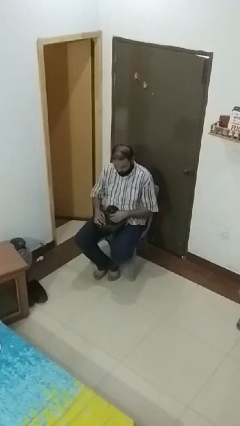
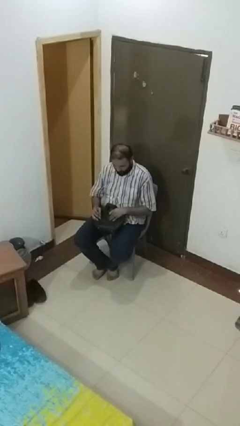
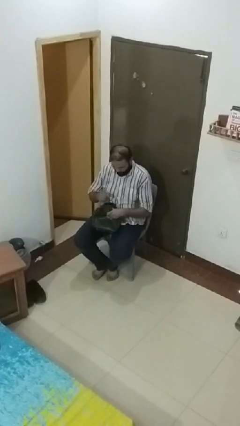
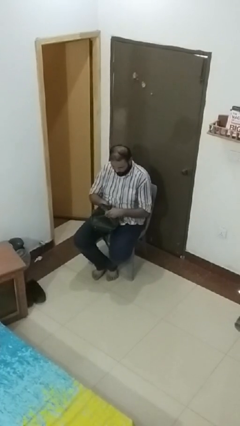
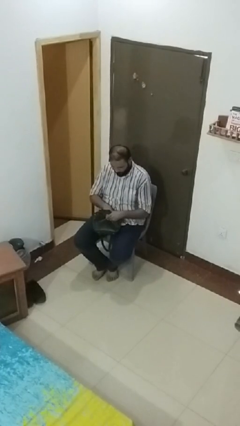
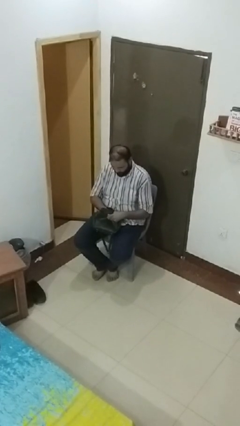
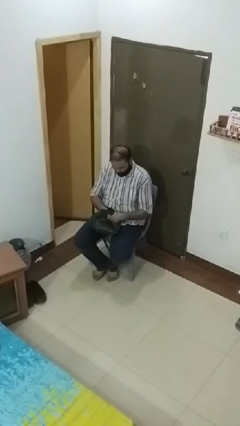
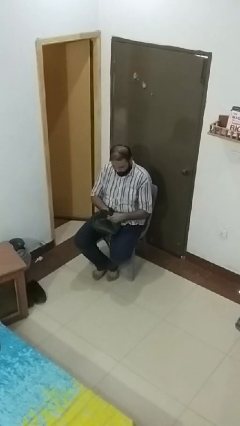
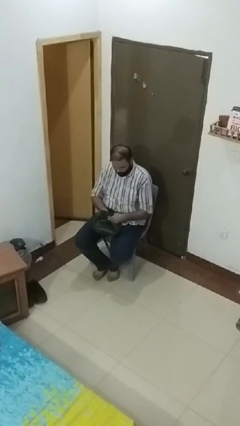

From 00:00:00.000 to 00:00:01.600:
person searches in purse

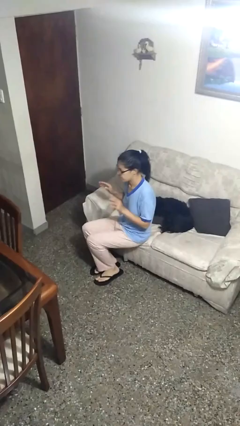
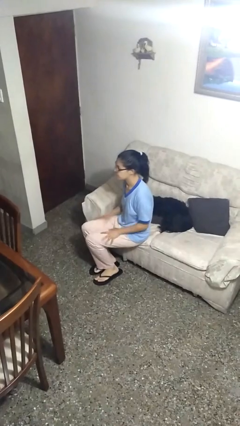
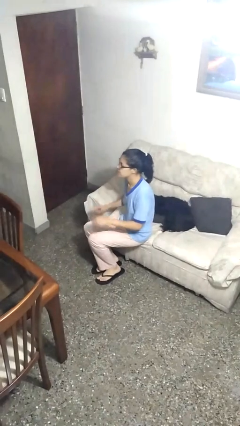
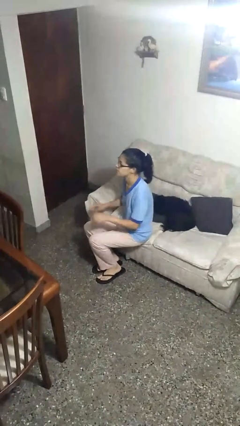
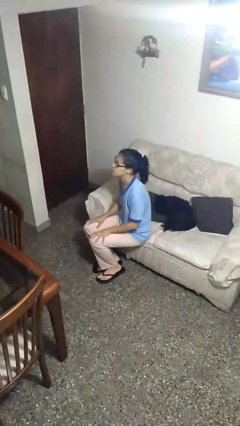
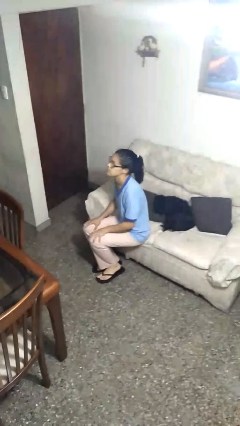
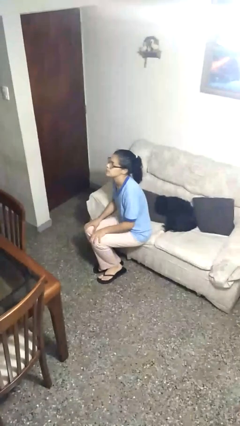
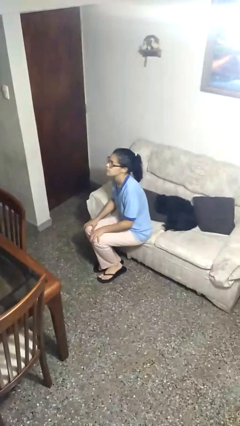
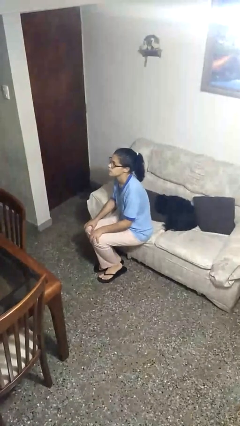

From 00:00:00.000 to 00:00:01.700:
person slaps hands on thighs

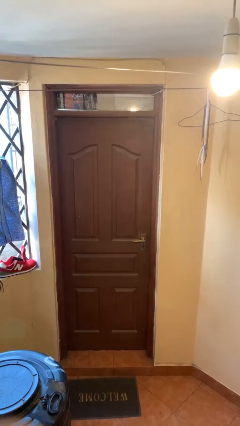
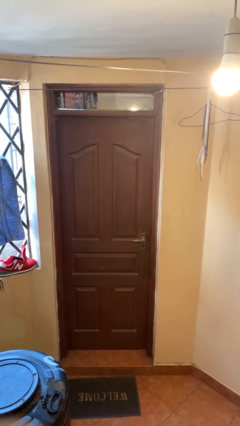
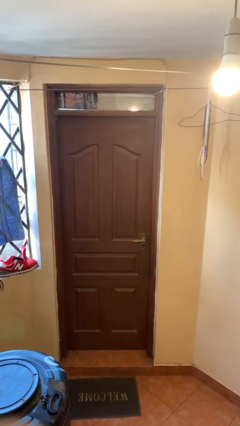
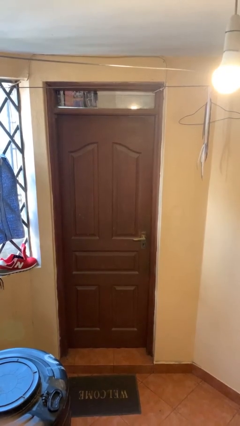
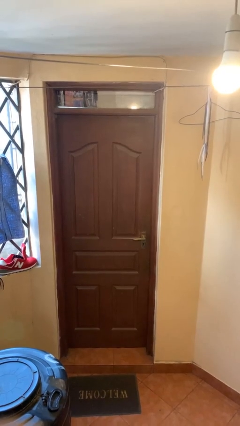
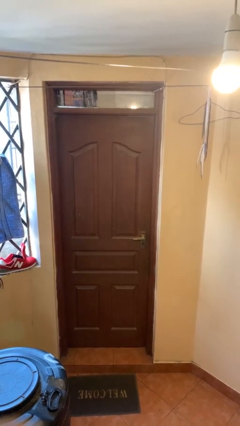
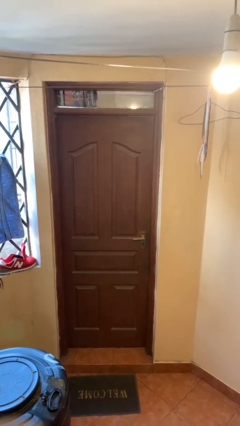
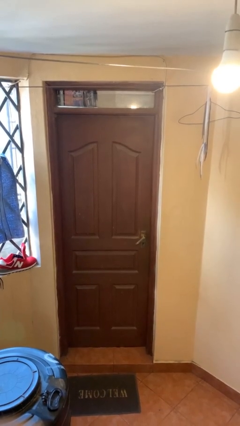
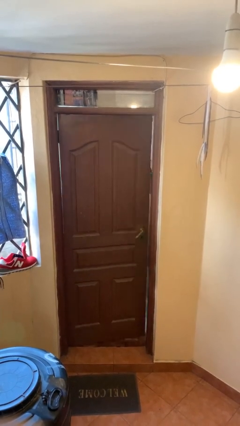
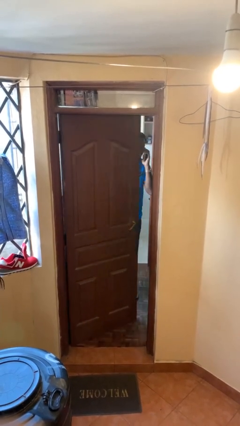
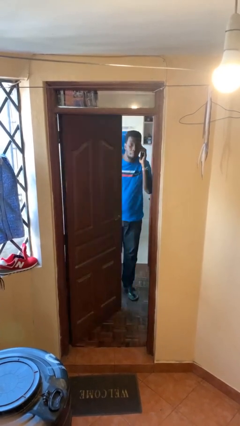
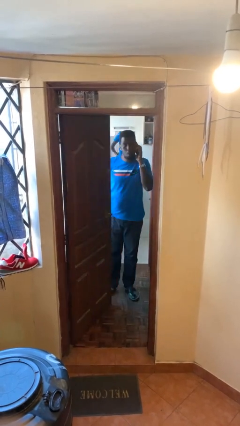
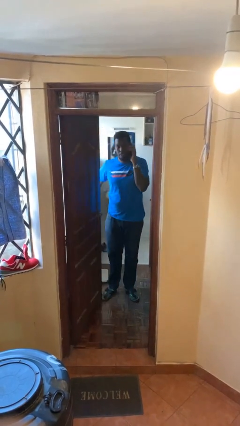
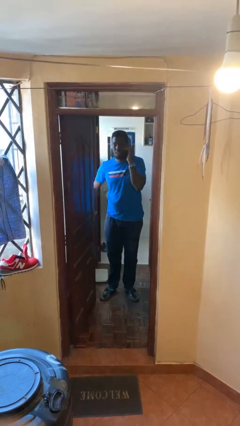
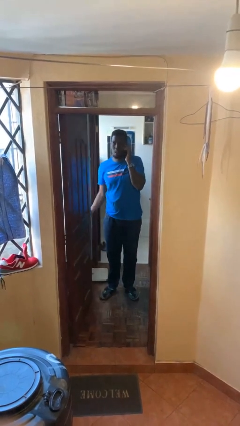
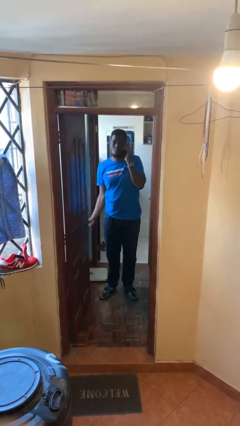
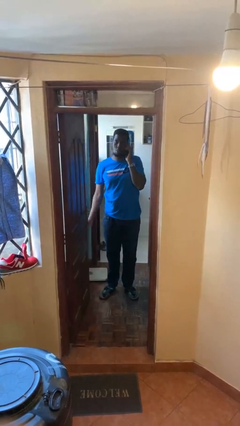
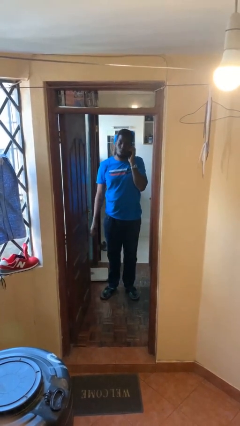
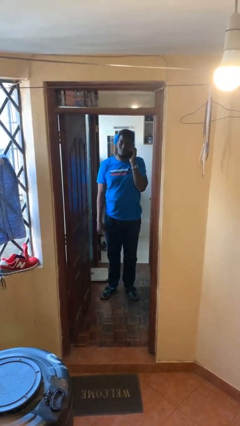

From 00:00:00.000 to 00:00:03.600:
person opens facility door

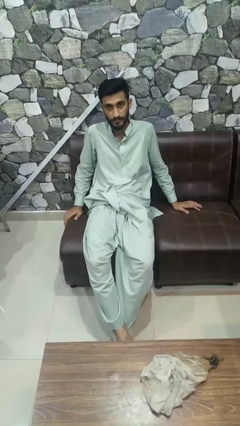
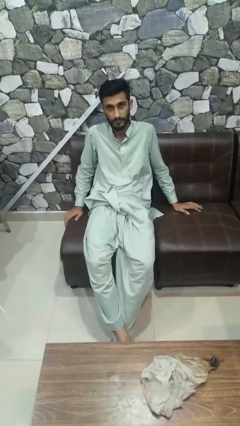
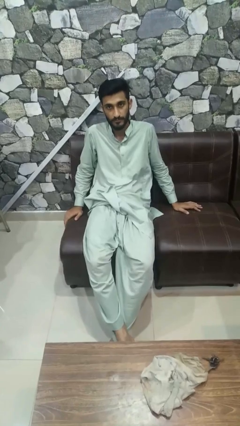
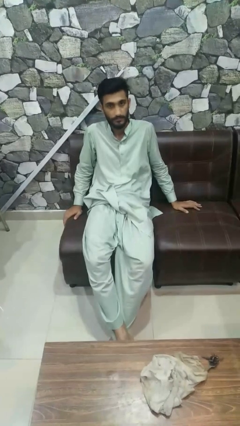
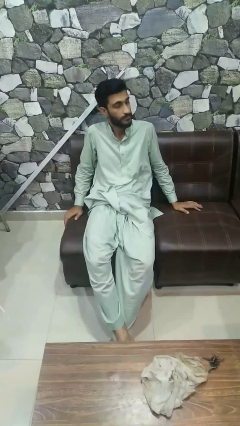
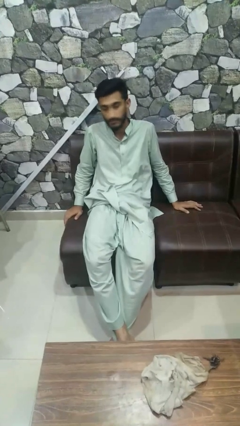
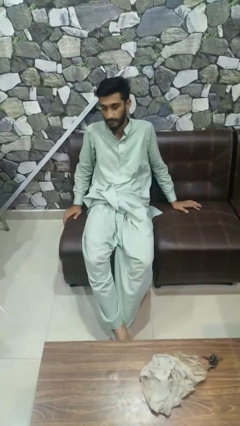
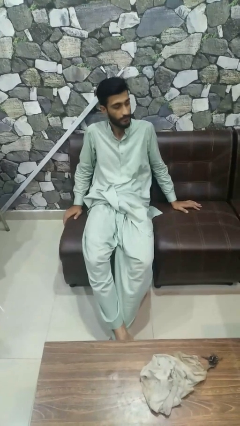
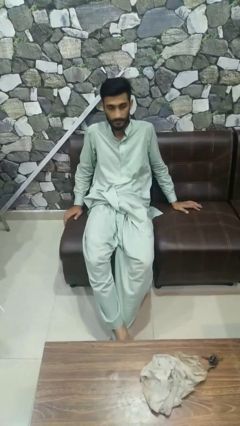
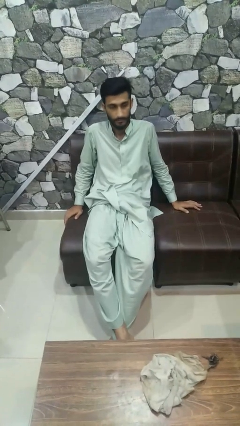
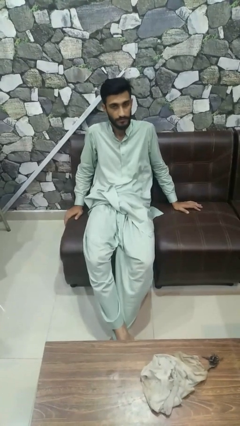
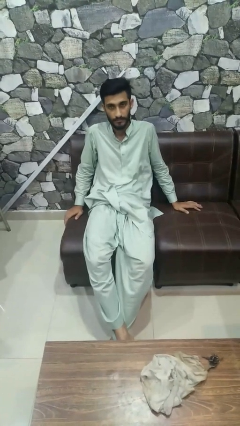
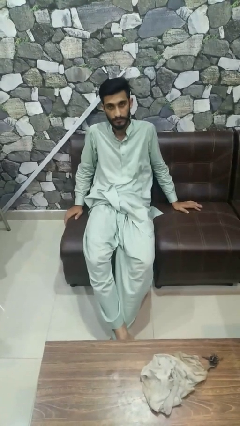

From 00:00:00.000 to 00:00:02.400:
person shakes head

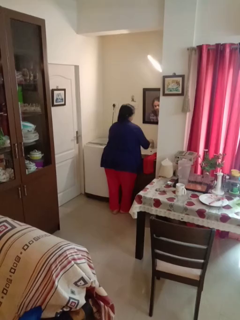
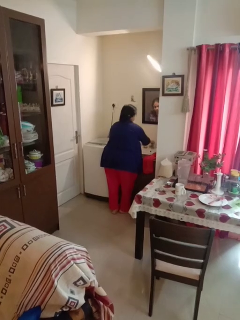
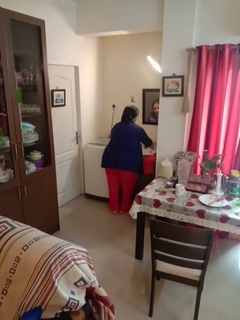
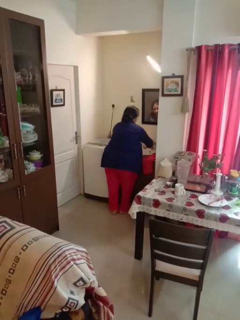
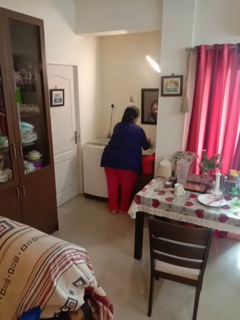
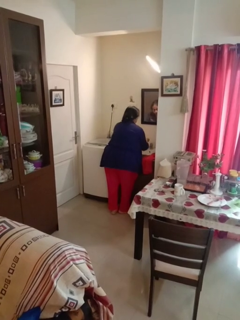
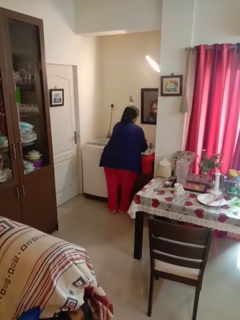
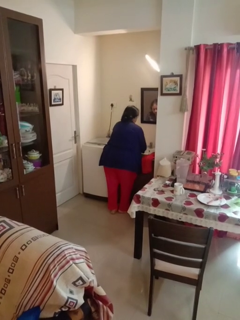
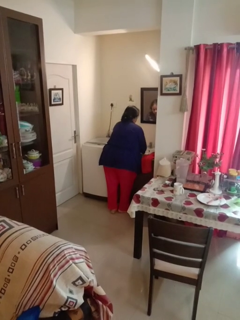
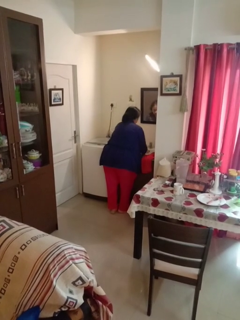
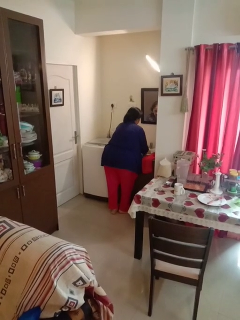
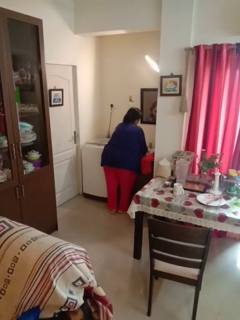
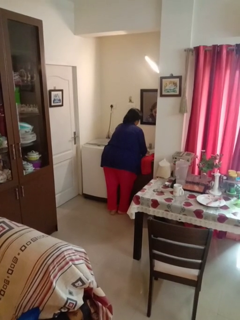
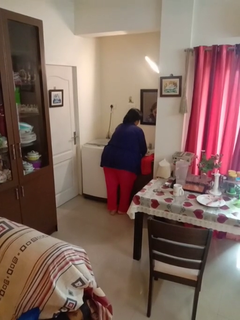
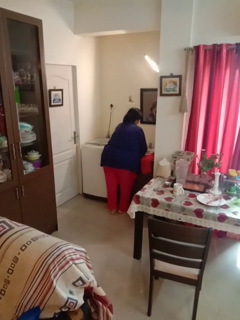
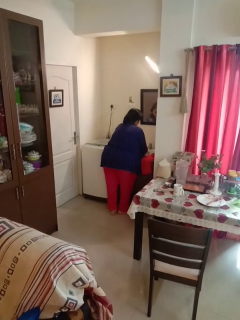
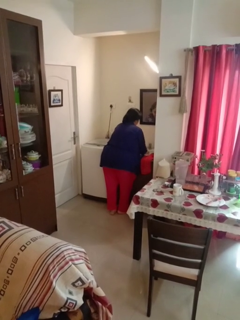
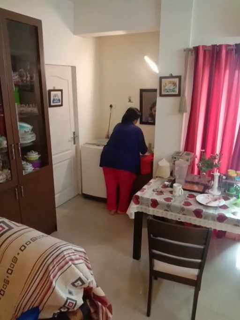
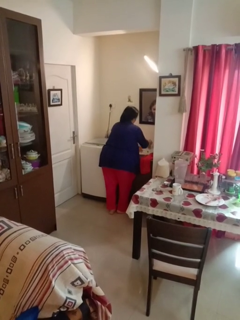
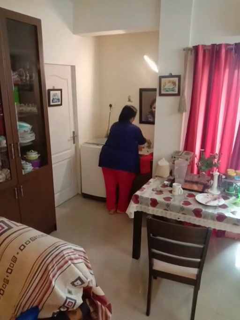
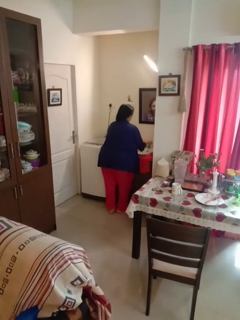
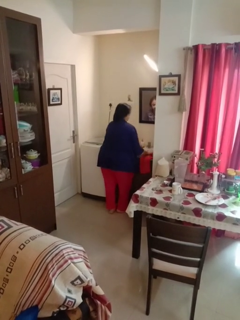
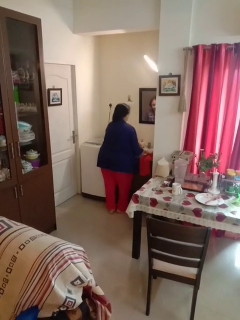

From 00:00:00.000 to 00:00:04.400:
person washes hands

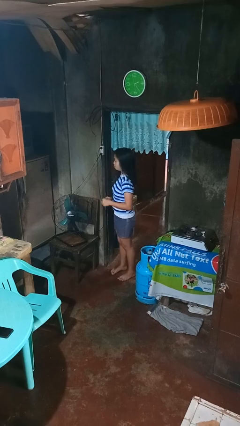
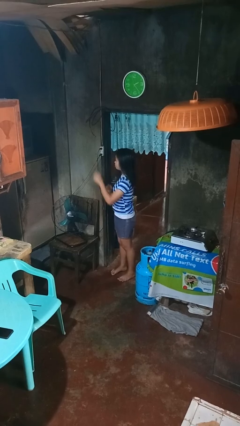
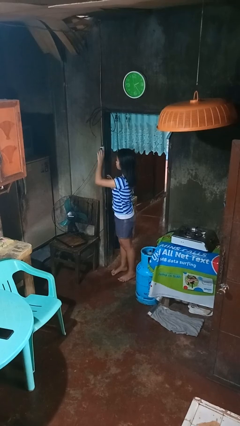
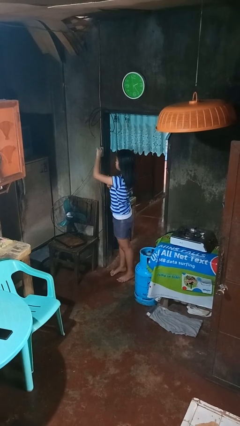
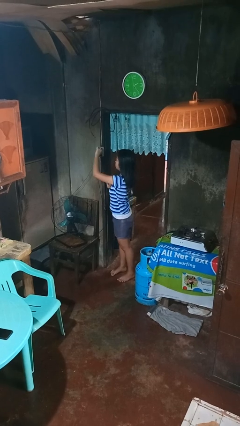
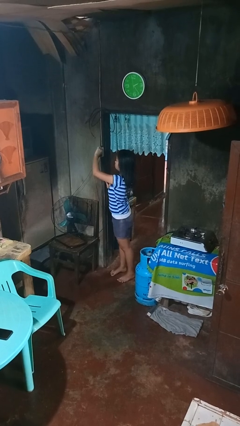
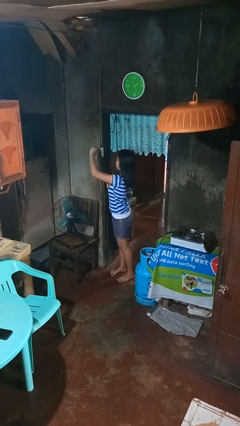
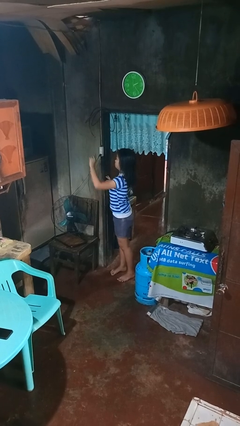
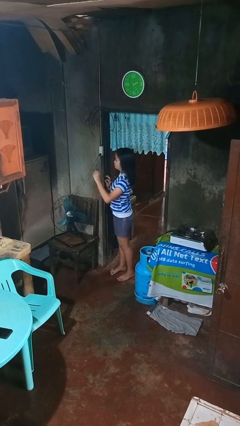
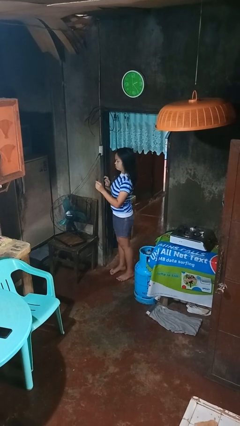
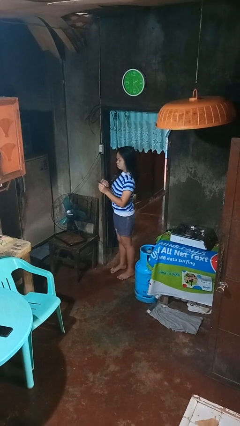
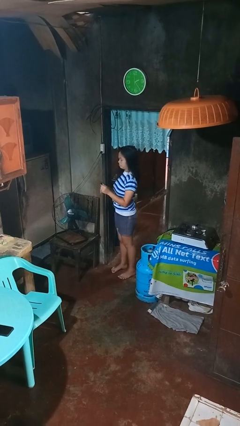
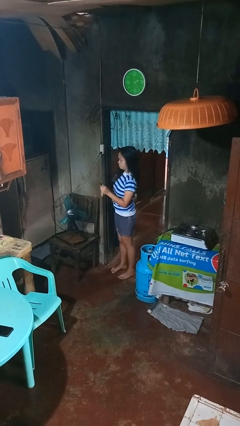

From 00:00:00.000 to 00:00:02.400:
person unplugs from electrical socket

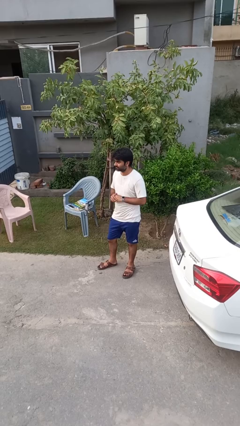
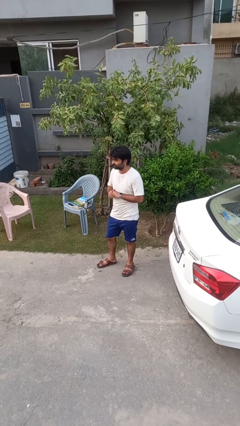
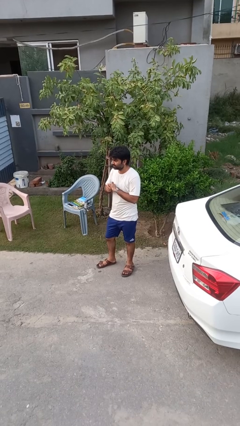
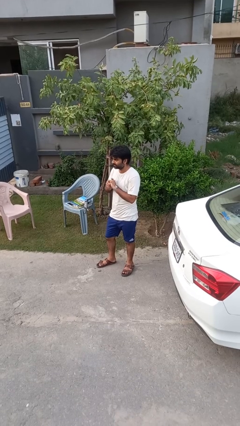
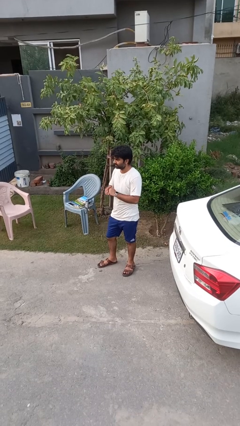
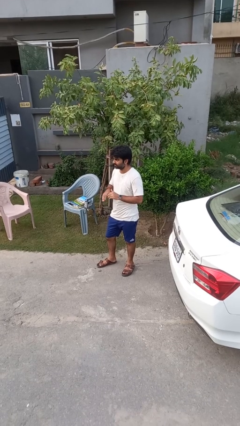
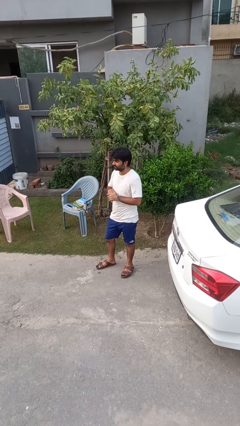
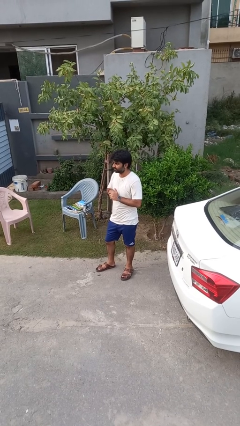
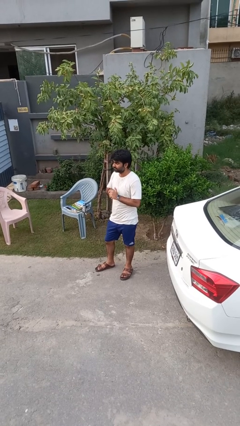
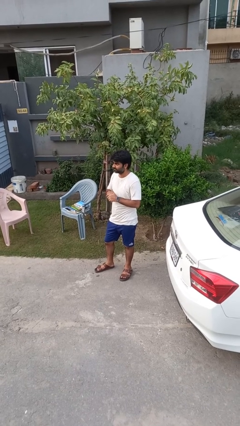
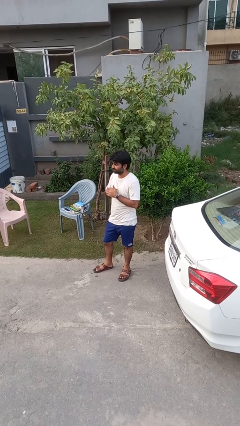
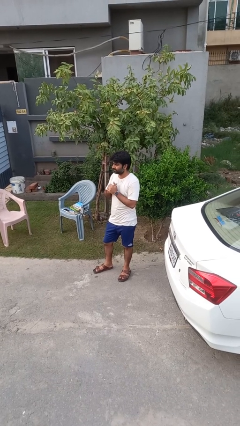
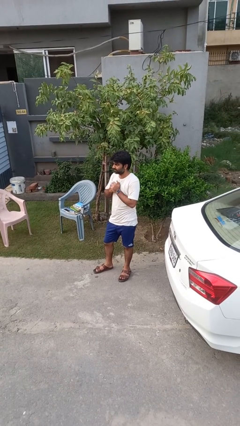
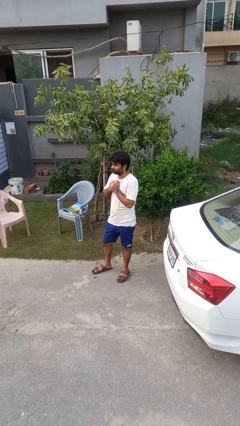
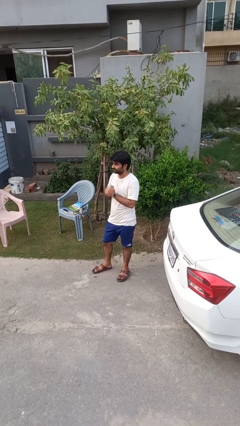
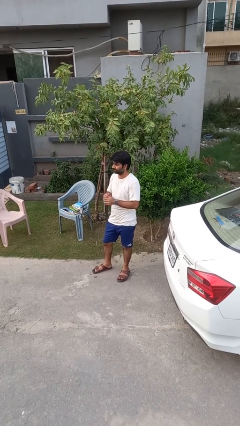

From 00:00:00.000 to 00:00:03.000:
person cracks knuckles
